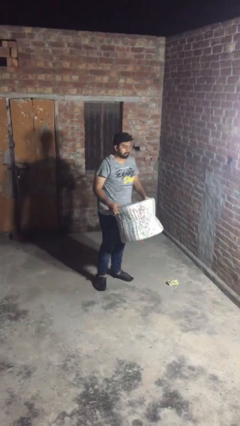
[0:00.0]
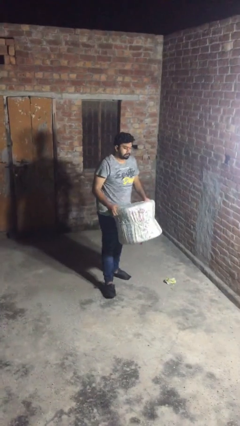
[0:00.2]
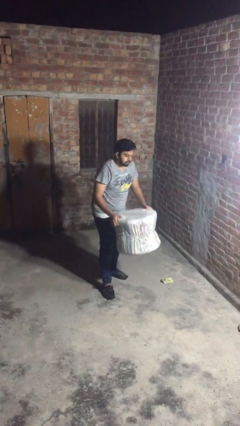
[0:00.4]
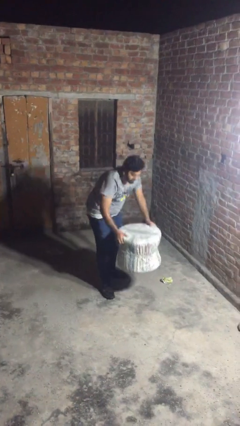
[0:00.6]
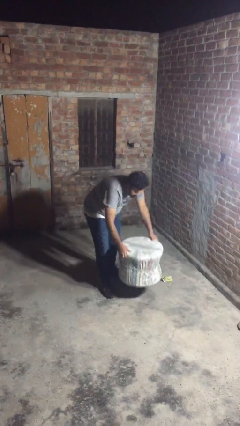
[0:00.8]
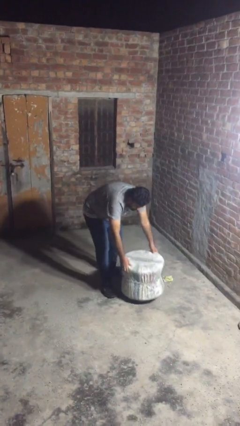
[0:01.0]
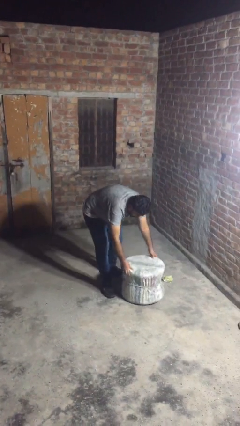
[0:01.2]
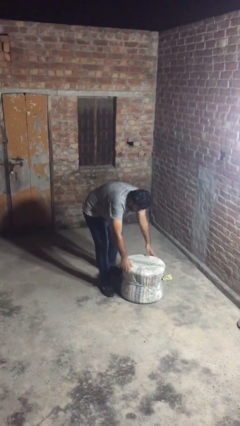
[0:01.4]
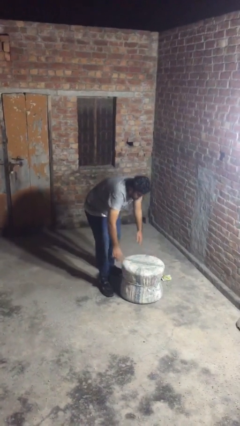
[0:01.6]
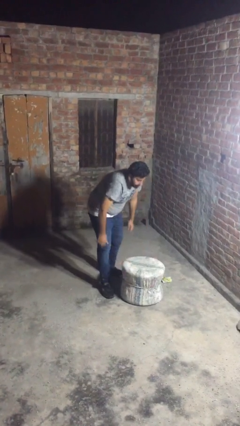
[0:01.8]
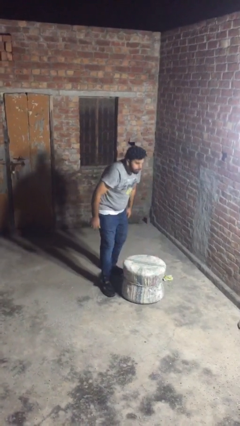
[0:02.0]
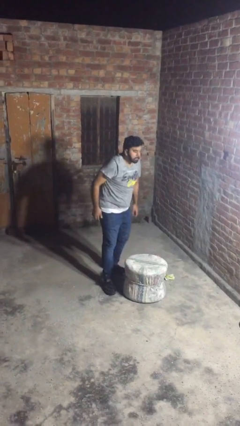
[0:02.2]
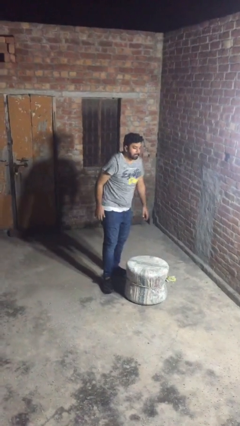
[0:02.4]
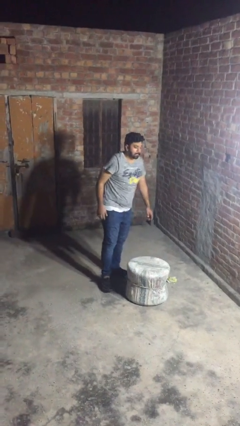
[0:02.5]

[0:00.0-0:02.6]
person puts down object on floor

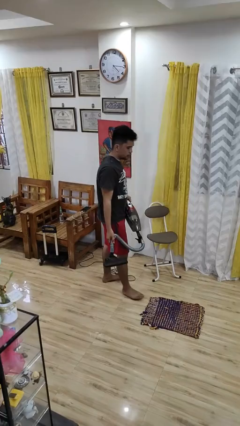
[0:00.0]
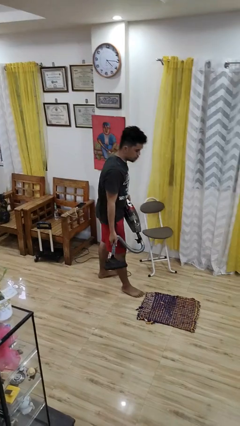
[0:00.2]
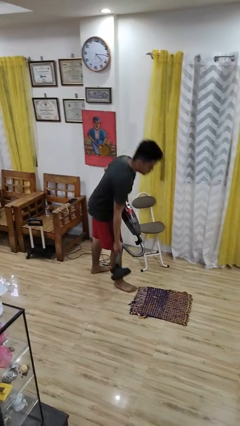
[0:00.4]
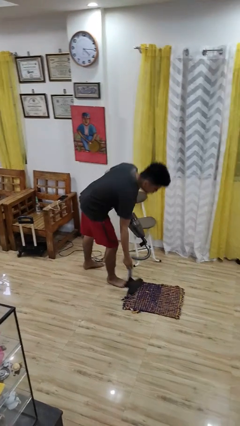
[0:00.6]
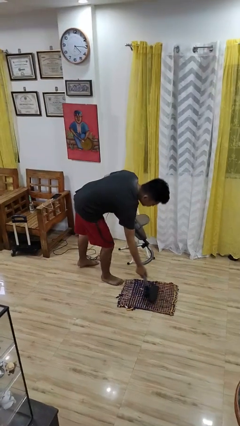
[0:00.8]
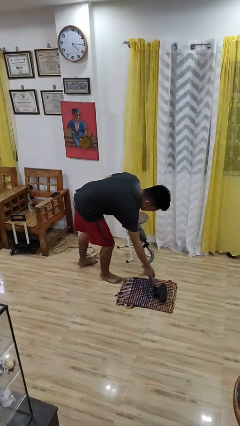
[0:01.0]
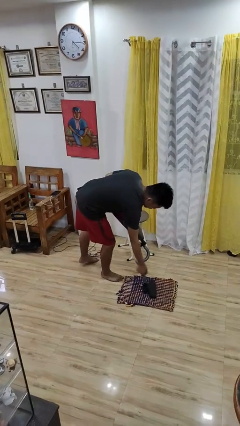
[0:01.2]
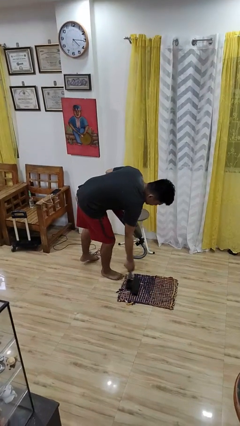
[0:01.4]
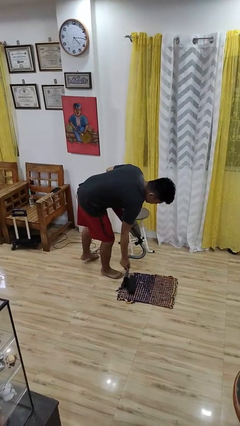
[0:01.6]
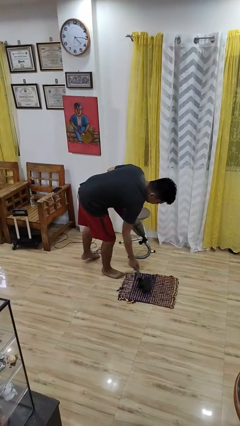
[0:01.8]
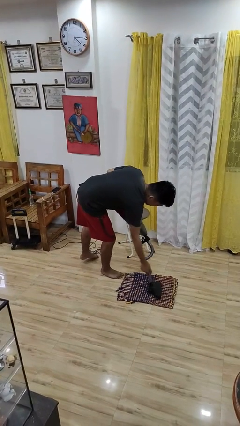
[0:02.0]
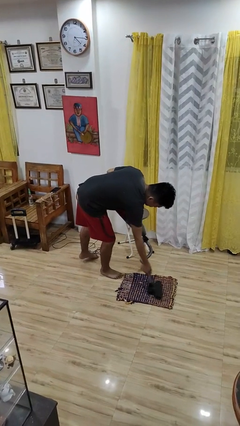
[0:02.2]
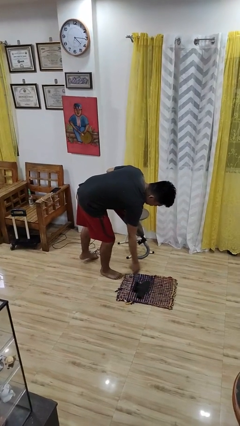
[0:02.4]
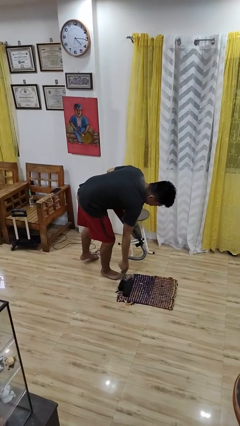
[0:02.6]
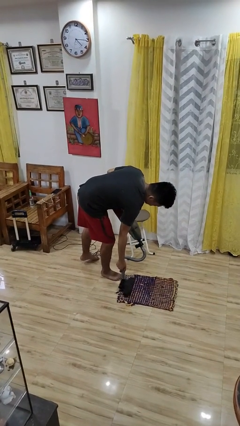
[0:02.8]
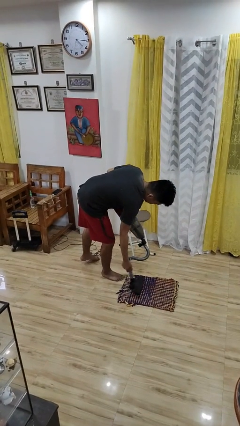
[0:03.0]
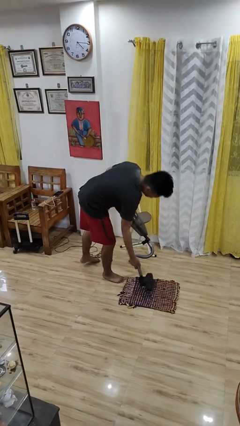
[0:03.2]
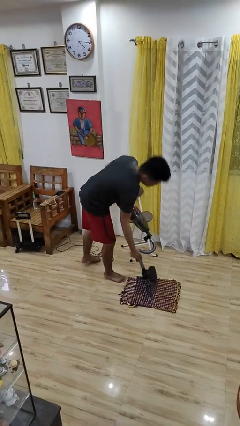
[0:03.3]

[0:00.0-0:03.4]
person vacuums carpet

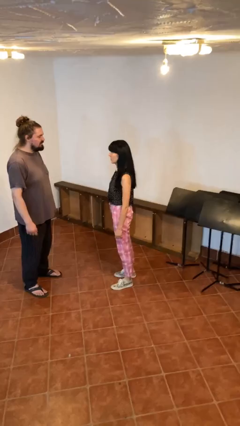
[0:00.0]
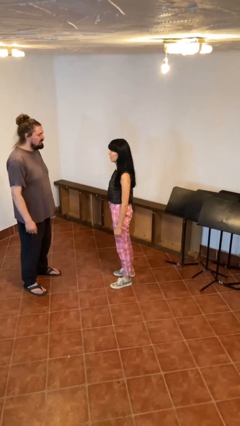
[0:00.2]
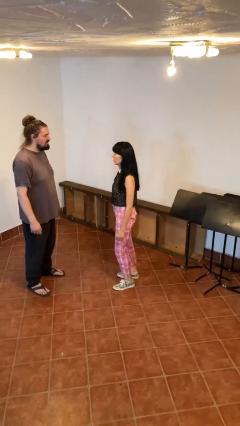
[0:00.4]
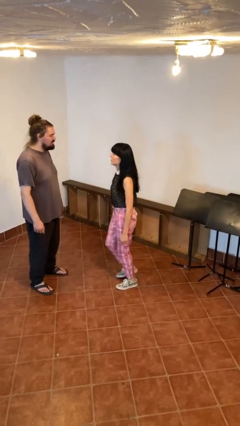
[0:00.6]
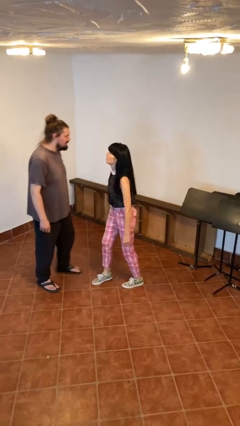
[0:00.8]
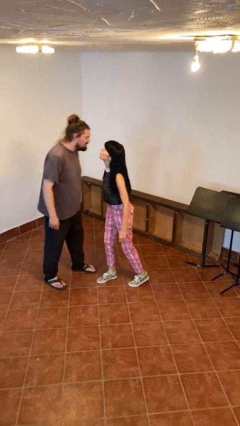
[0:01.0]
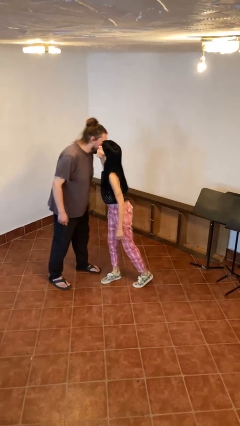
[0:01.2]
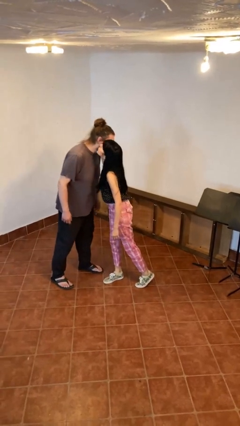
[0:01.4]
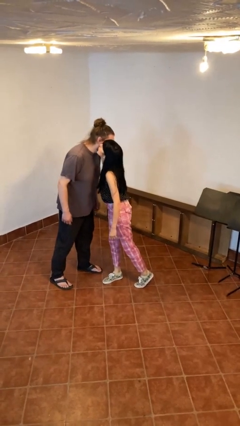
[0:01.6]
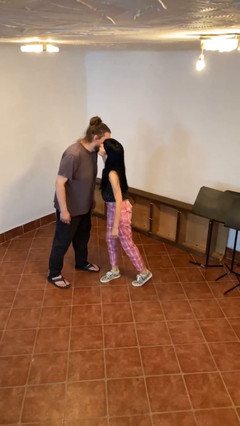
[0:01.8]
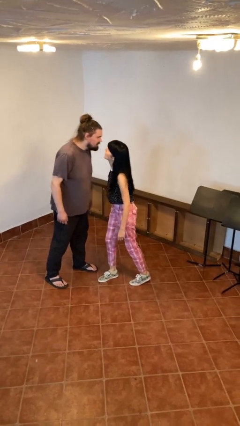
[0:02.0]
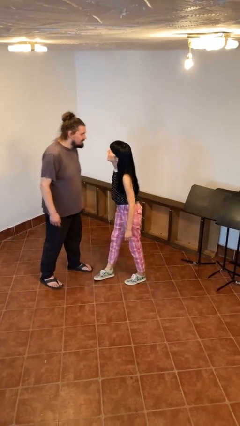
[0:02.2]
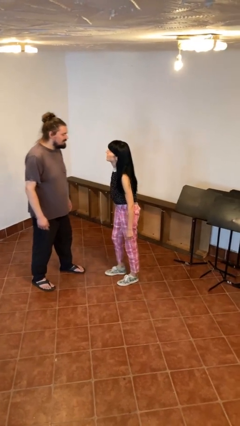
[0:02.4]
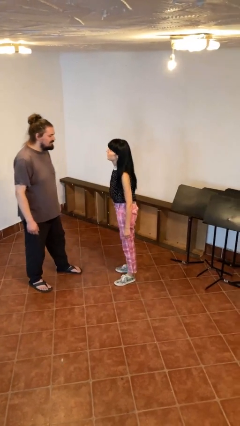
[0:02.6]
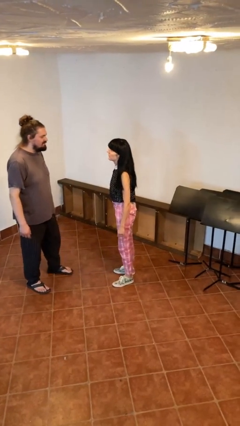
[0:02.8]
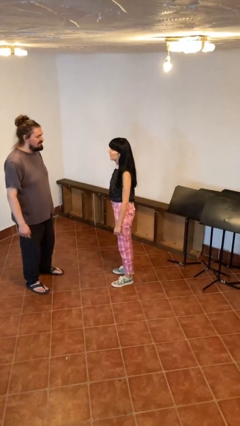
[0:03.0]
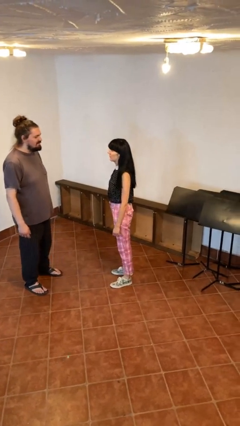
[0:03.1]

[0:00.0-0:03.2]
person kisses cheek of person

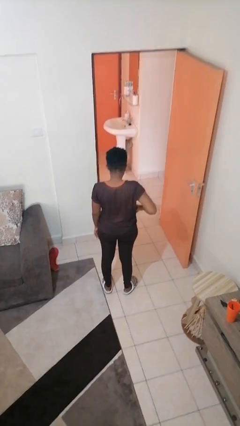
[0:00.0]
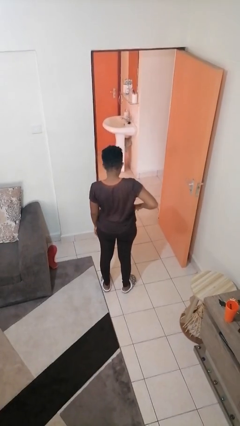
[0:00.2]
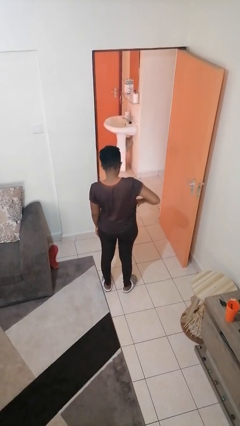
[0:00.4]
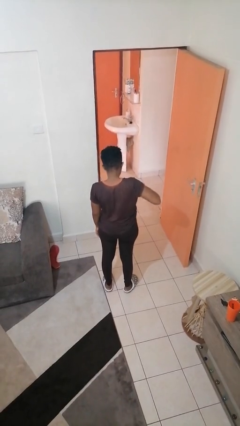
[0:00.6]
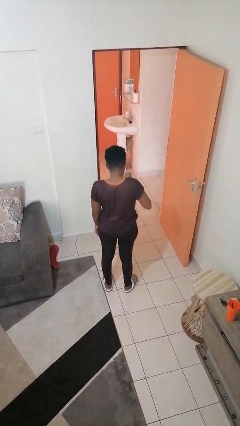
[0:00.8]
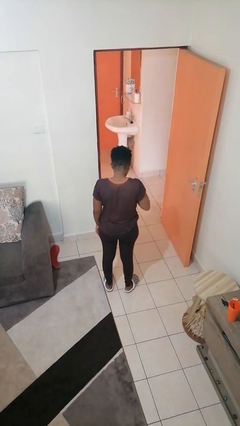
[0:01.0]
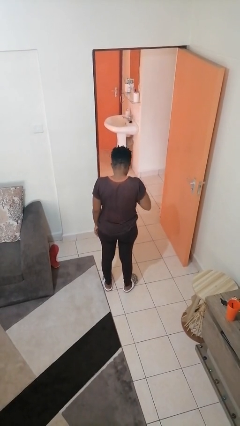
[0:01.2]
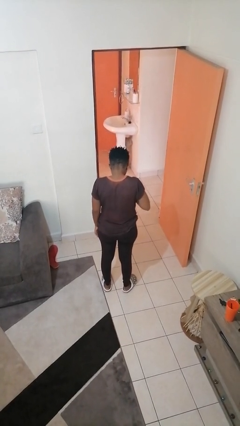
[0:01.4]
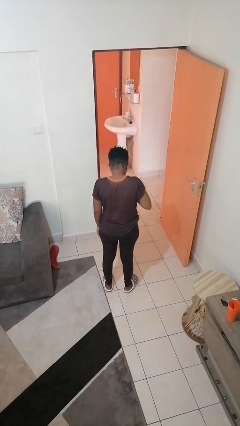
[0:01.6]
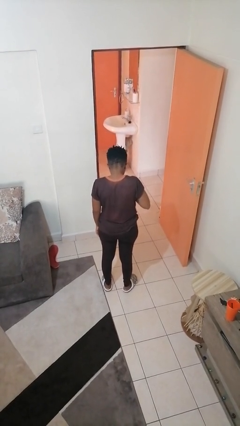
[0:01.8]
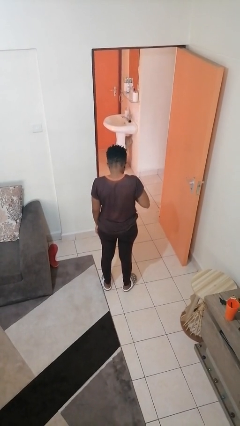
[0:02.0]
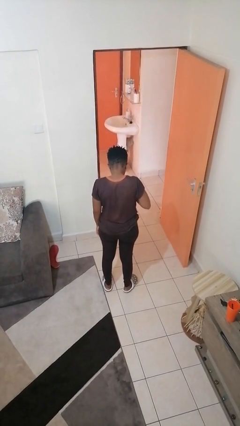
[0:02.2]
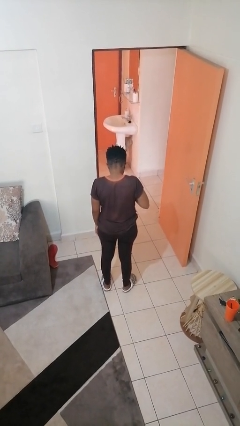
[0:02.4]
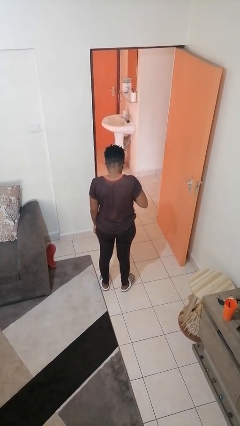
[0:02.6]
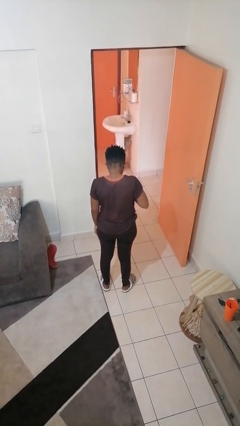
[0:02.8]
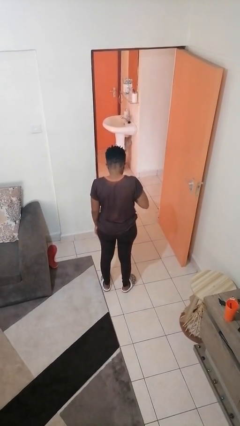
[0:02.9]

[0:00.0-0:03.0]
person takes phone from pocket

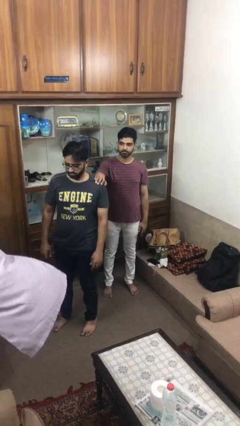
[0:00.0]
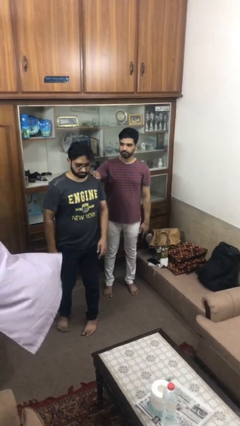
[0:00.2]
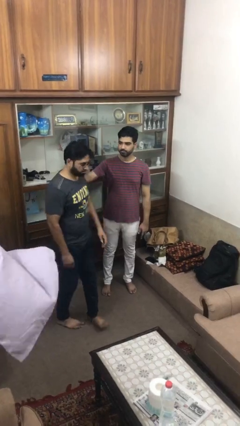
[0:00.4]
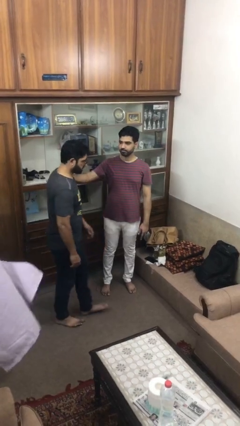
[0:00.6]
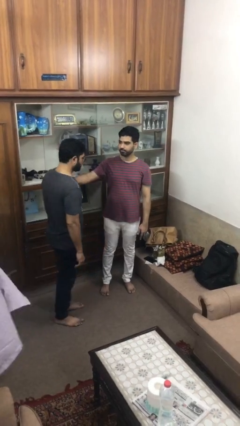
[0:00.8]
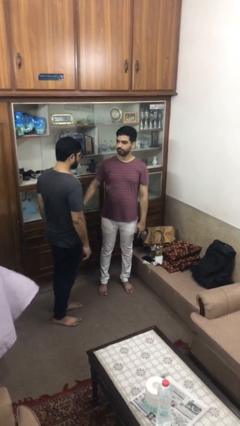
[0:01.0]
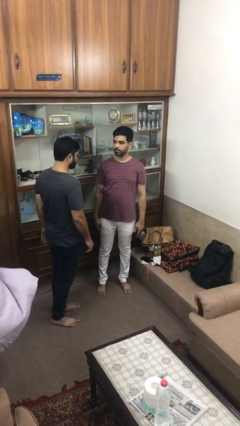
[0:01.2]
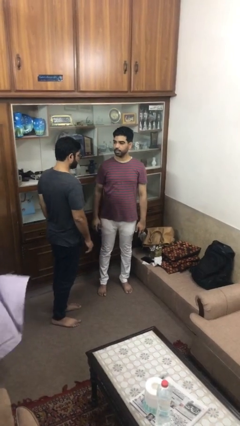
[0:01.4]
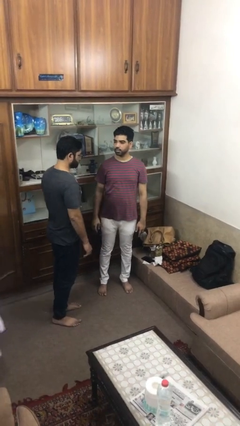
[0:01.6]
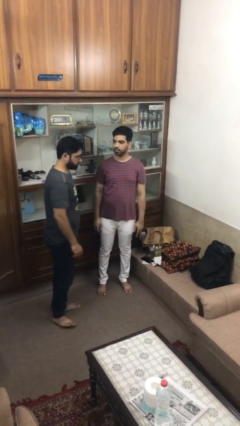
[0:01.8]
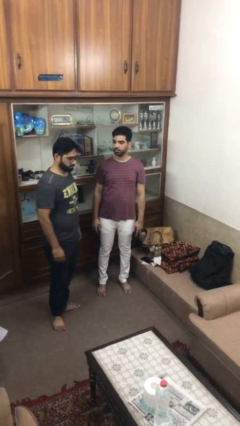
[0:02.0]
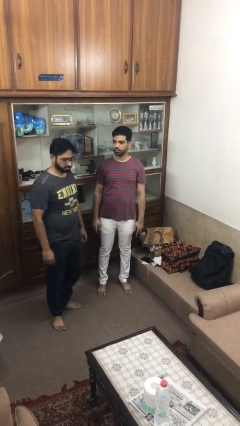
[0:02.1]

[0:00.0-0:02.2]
person spins person around

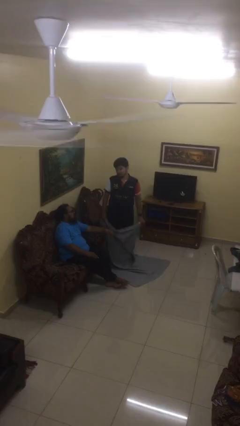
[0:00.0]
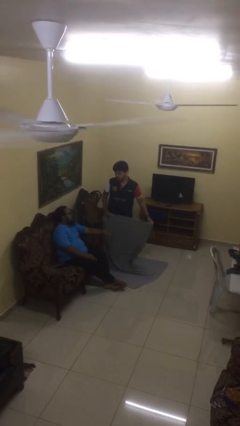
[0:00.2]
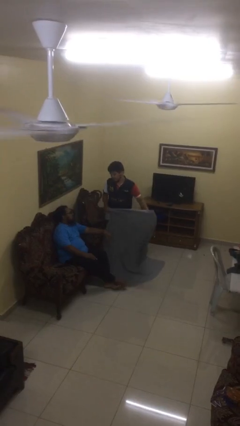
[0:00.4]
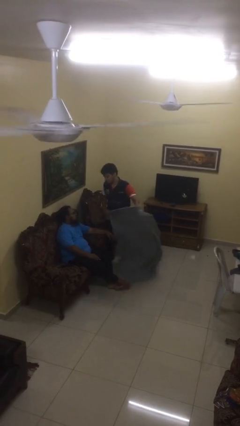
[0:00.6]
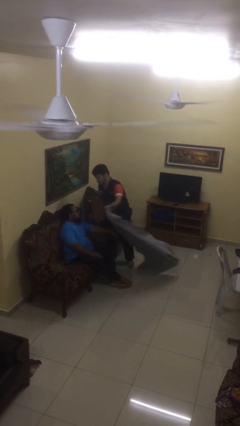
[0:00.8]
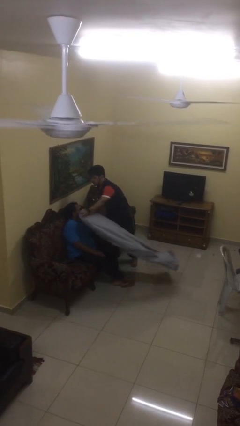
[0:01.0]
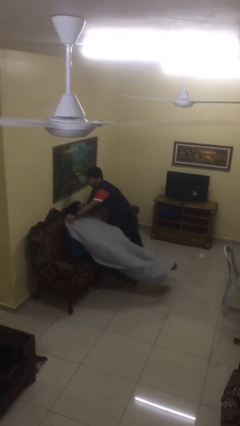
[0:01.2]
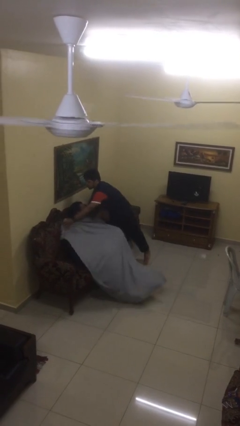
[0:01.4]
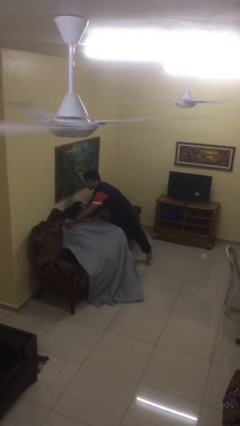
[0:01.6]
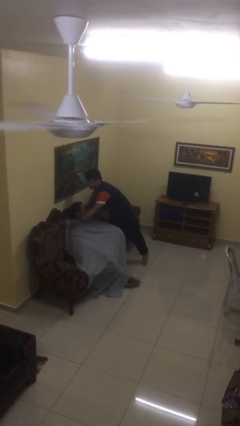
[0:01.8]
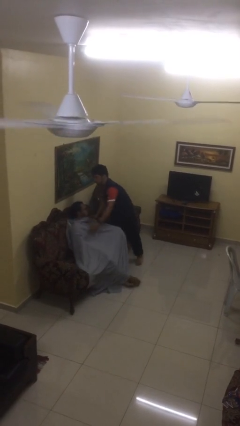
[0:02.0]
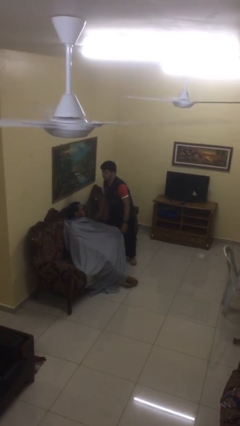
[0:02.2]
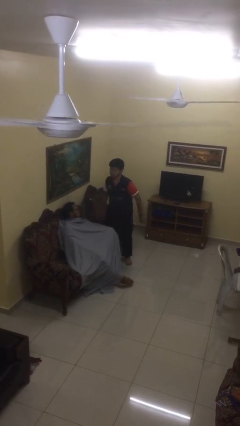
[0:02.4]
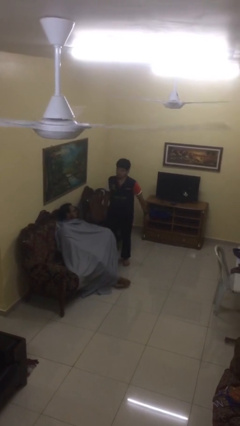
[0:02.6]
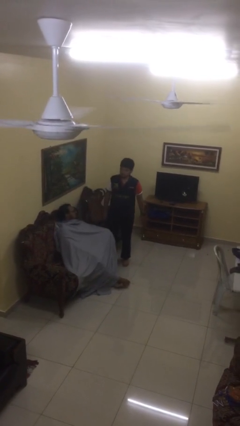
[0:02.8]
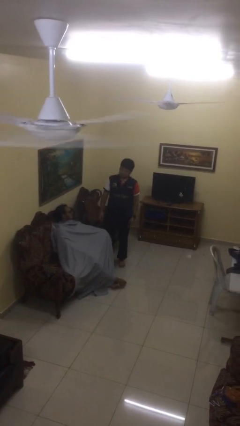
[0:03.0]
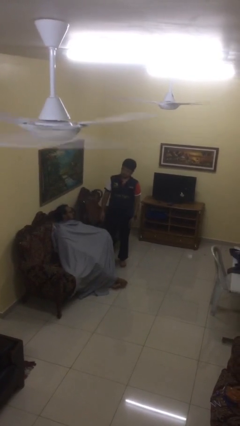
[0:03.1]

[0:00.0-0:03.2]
person covers friend with blanket
